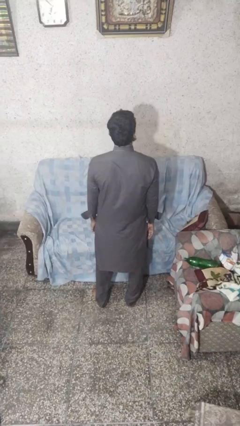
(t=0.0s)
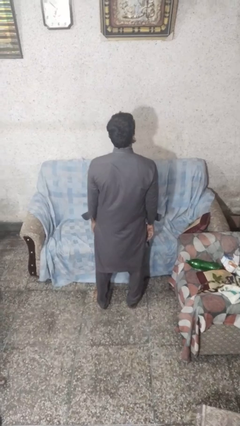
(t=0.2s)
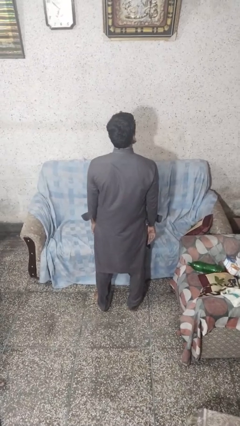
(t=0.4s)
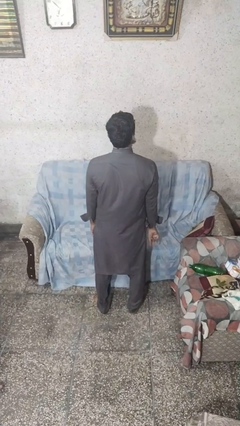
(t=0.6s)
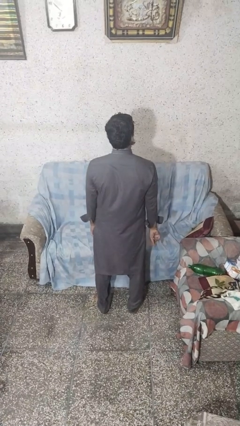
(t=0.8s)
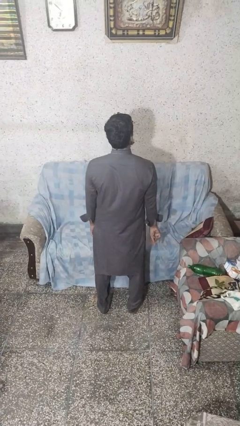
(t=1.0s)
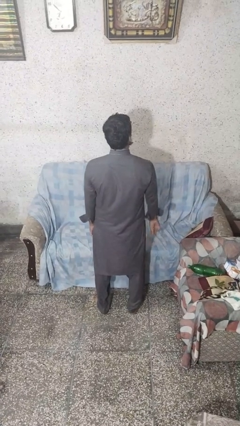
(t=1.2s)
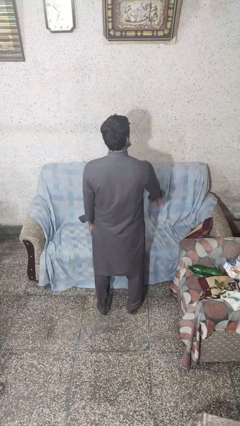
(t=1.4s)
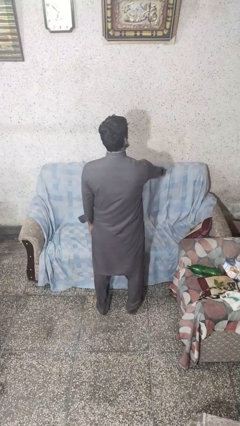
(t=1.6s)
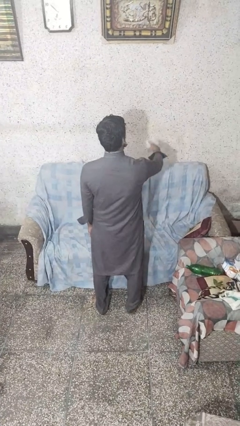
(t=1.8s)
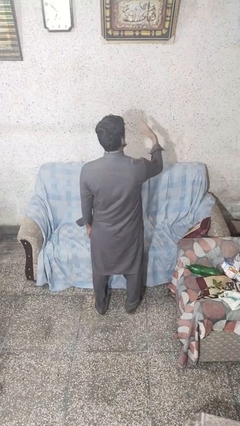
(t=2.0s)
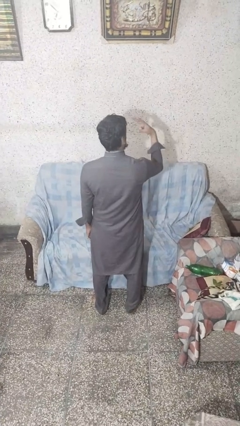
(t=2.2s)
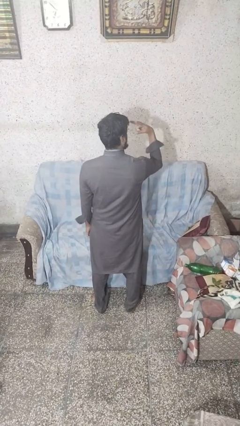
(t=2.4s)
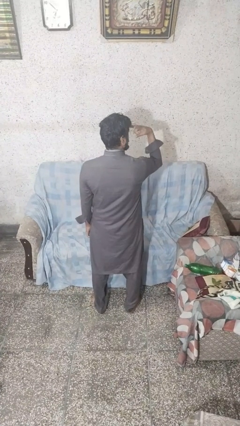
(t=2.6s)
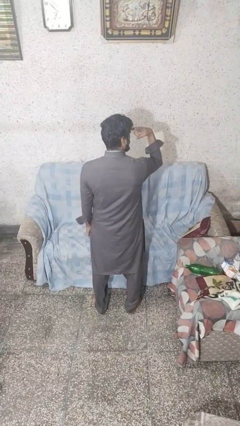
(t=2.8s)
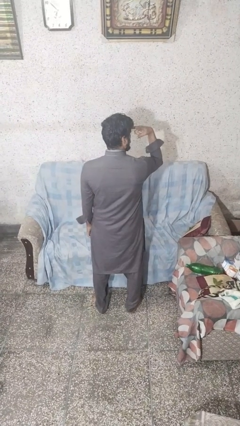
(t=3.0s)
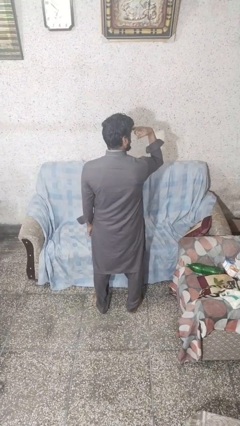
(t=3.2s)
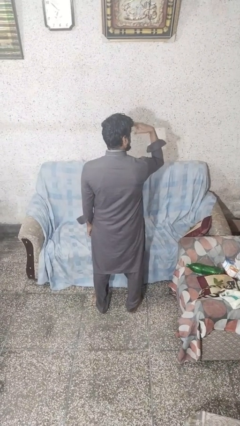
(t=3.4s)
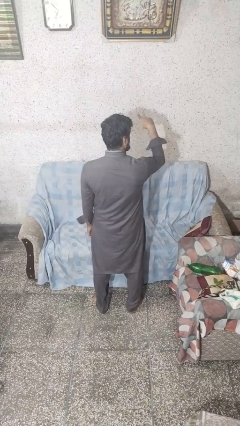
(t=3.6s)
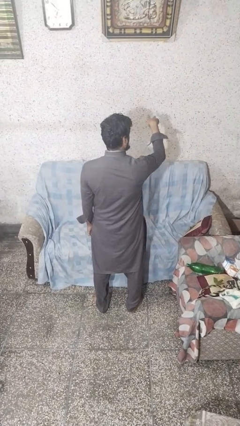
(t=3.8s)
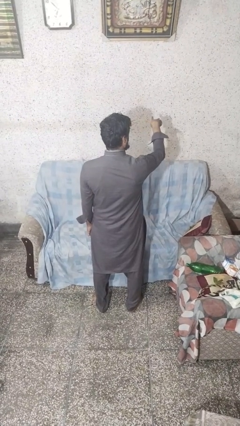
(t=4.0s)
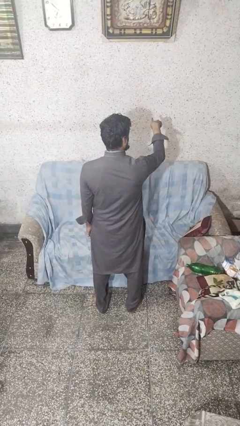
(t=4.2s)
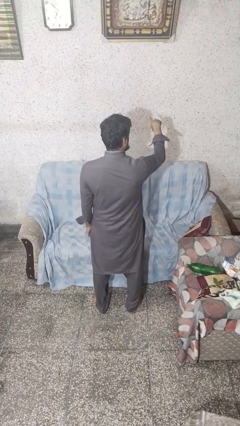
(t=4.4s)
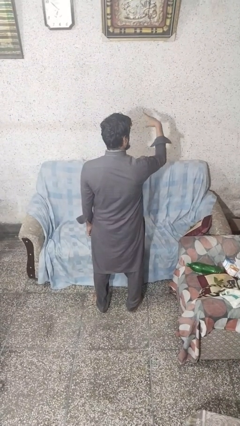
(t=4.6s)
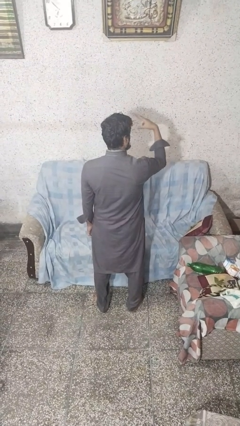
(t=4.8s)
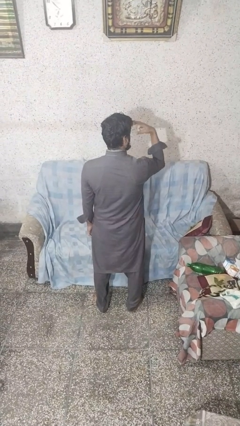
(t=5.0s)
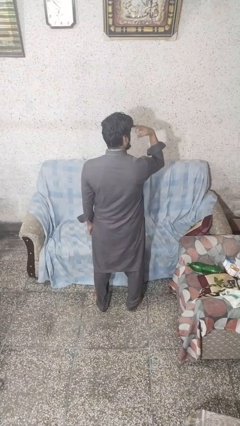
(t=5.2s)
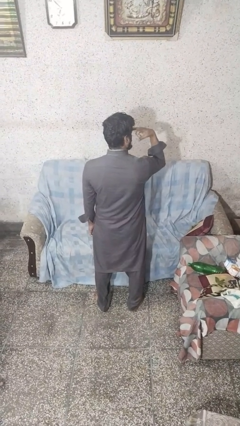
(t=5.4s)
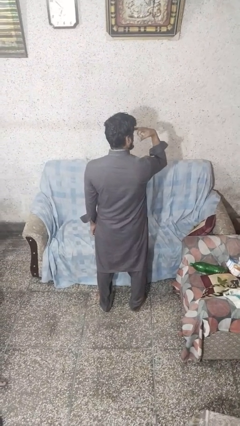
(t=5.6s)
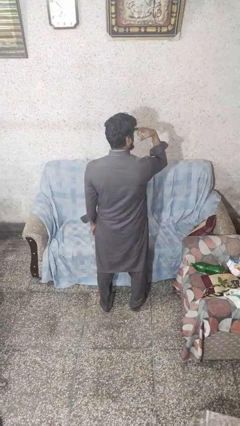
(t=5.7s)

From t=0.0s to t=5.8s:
person gestures watch closely

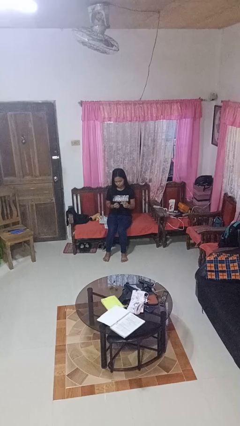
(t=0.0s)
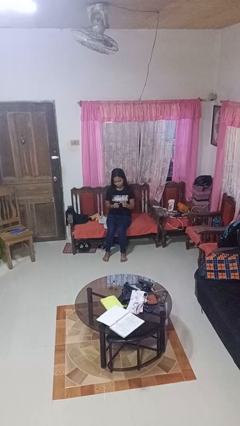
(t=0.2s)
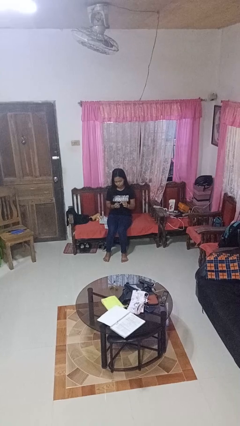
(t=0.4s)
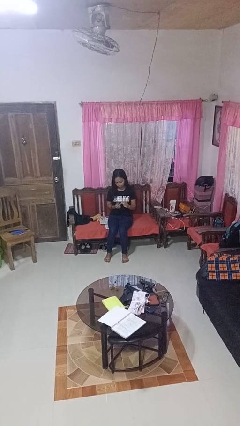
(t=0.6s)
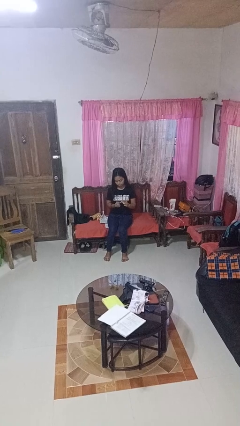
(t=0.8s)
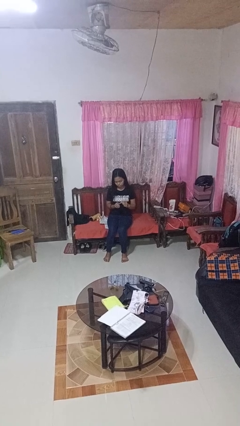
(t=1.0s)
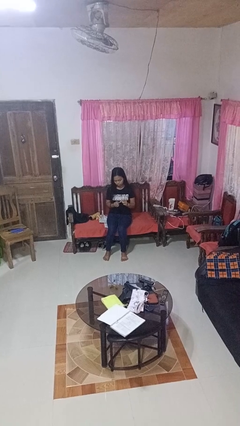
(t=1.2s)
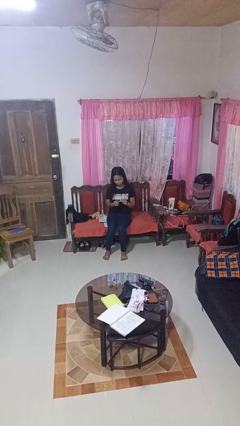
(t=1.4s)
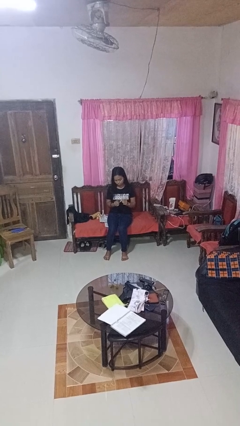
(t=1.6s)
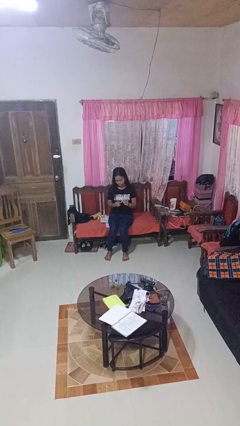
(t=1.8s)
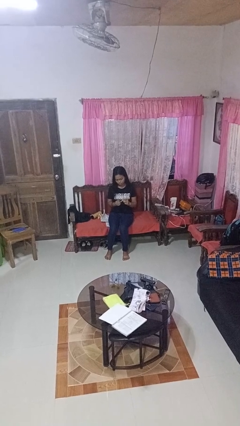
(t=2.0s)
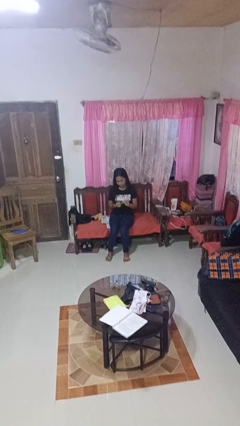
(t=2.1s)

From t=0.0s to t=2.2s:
person clips fingernails

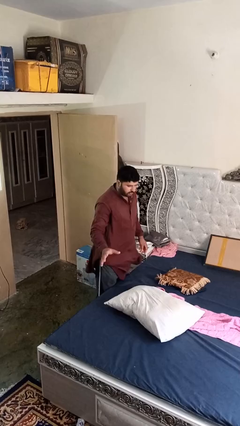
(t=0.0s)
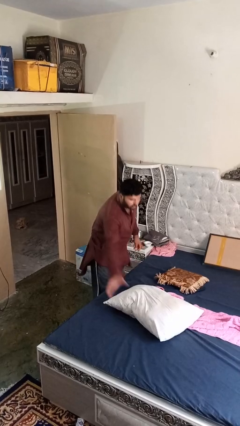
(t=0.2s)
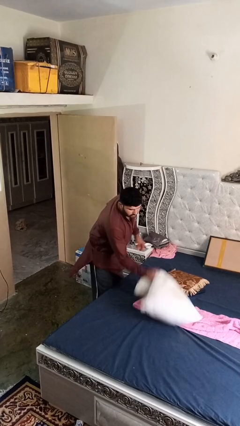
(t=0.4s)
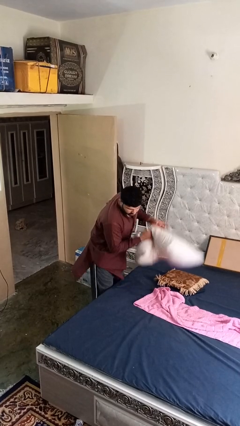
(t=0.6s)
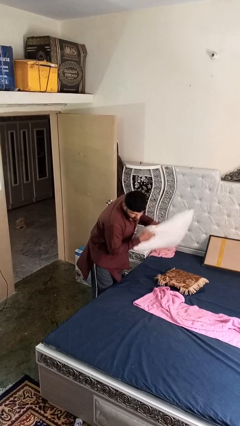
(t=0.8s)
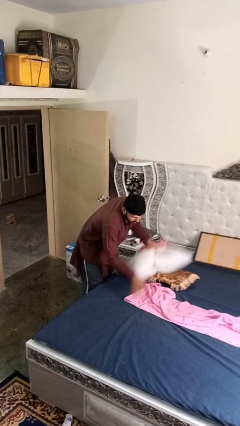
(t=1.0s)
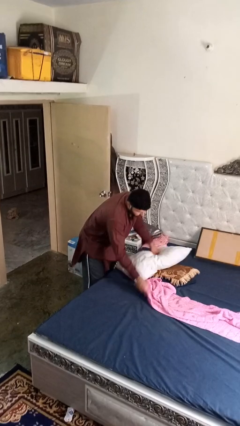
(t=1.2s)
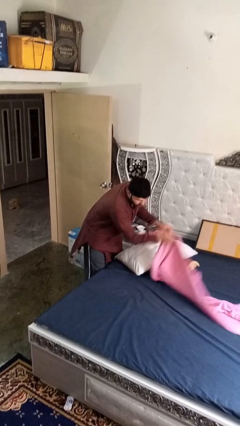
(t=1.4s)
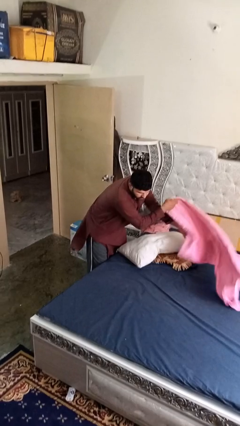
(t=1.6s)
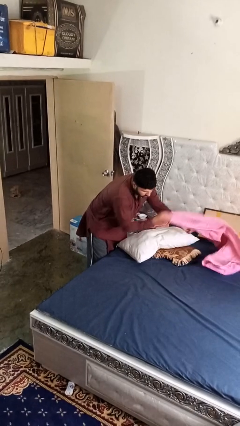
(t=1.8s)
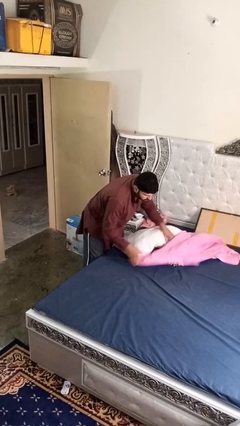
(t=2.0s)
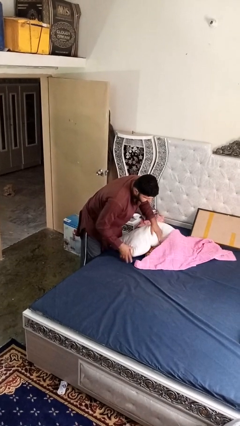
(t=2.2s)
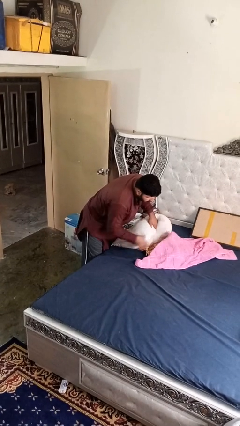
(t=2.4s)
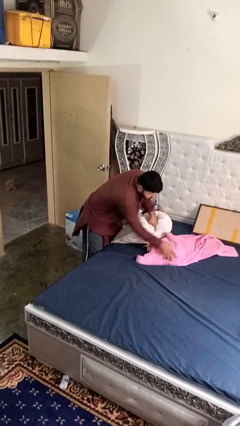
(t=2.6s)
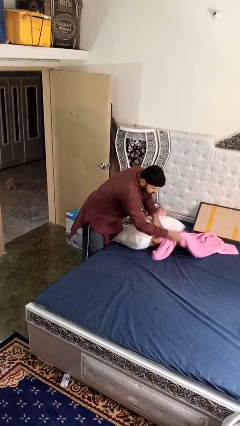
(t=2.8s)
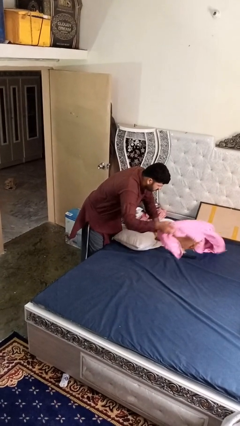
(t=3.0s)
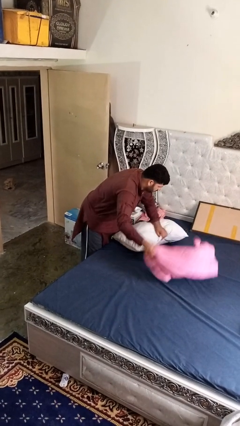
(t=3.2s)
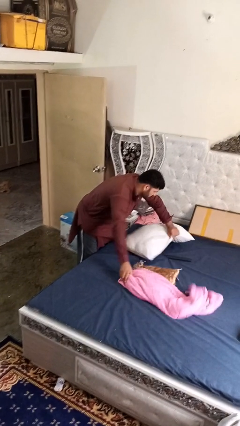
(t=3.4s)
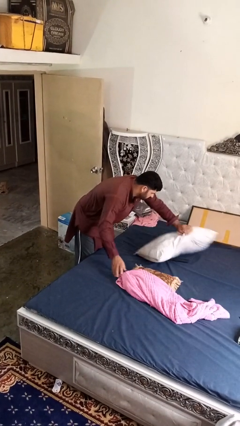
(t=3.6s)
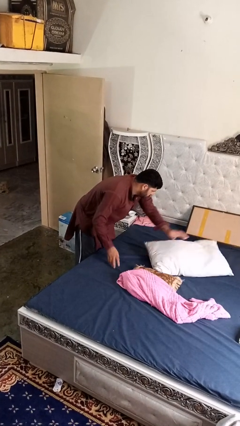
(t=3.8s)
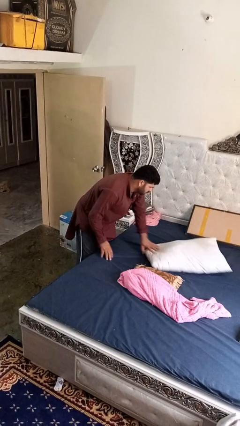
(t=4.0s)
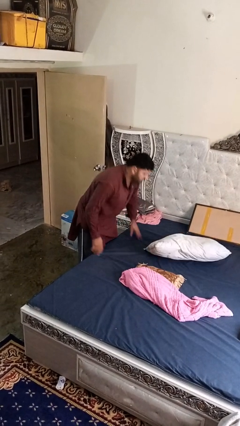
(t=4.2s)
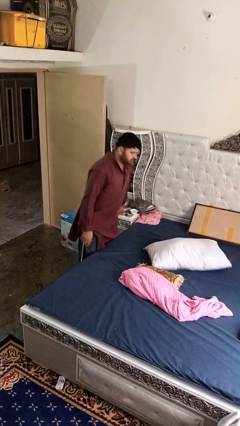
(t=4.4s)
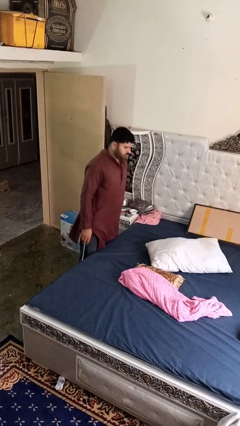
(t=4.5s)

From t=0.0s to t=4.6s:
person searches under bed

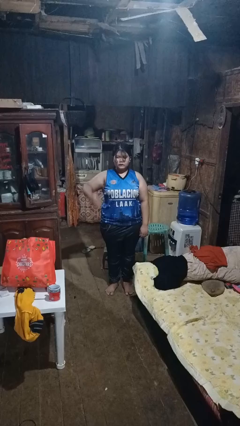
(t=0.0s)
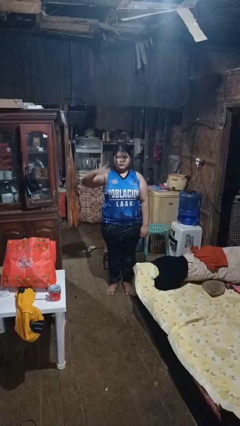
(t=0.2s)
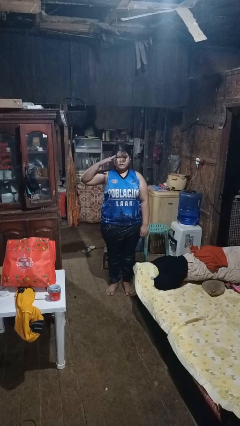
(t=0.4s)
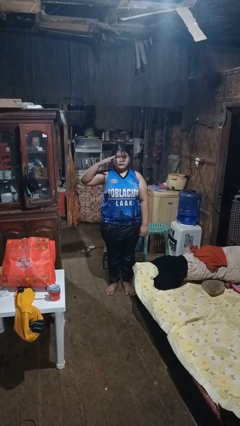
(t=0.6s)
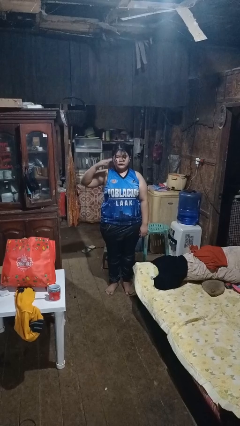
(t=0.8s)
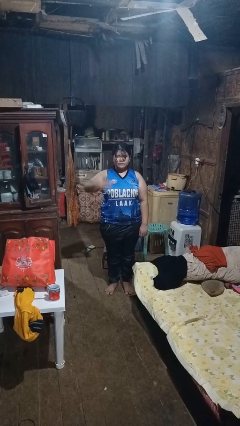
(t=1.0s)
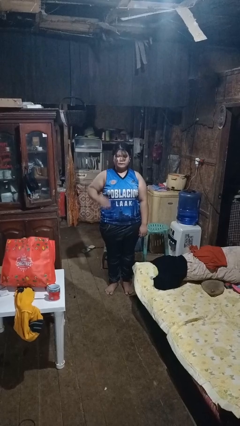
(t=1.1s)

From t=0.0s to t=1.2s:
person salutes

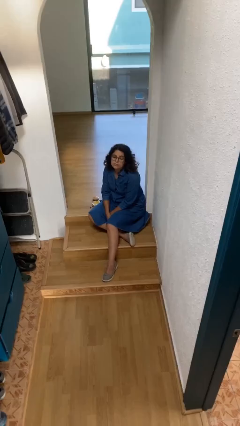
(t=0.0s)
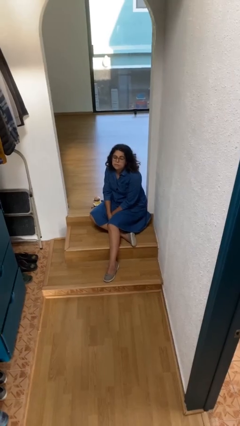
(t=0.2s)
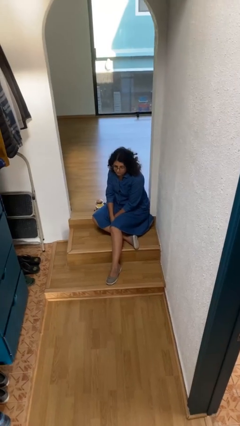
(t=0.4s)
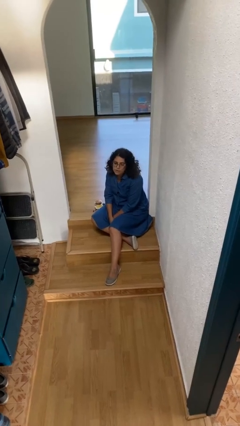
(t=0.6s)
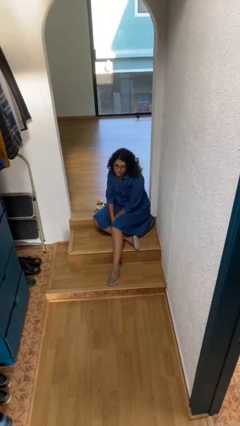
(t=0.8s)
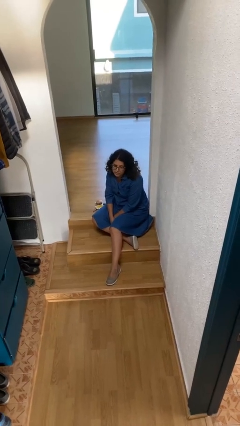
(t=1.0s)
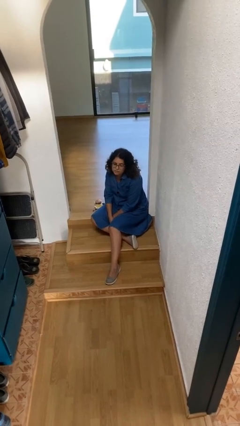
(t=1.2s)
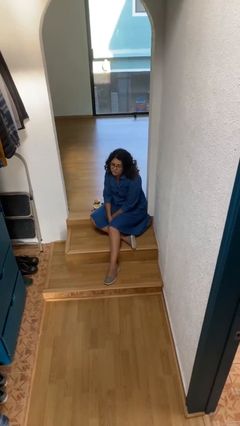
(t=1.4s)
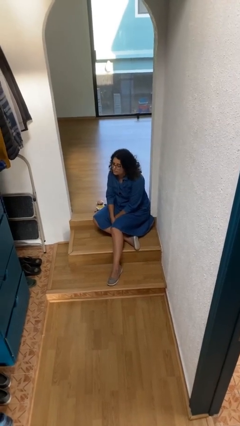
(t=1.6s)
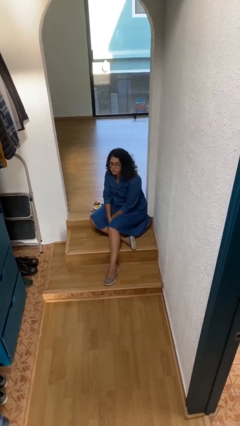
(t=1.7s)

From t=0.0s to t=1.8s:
person nods head

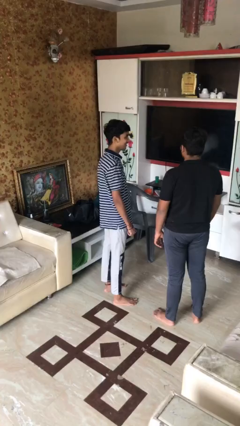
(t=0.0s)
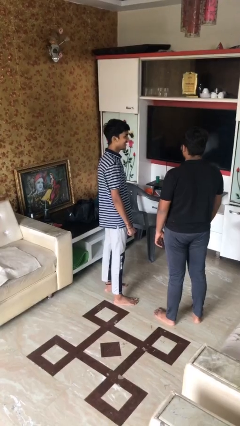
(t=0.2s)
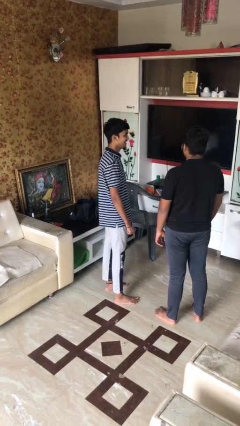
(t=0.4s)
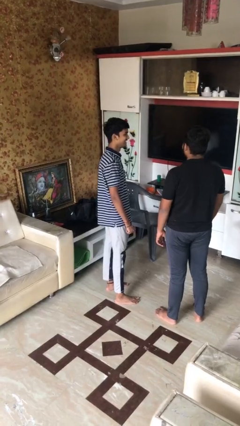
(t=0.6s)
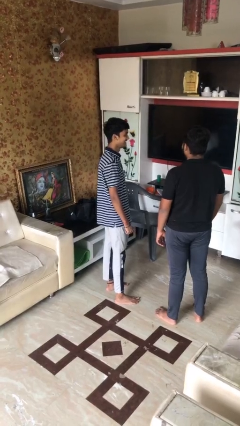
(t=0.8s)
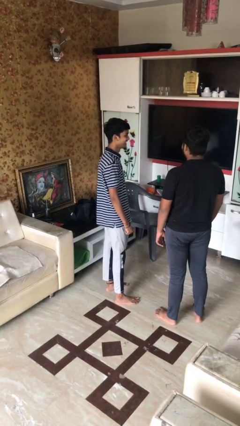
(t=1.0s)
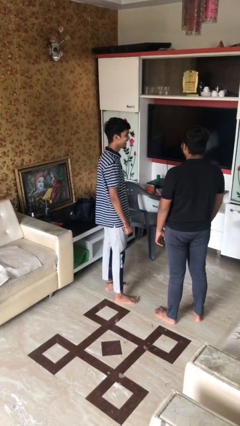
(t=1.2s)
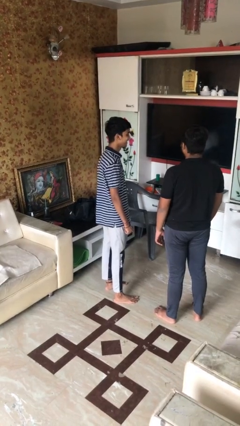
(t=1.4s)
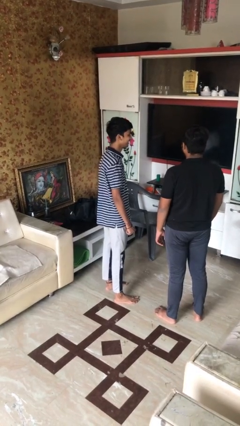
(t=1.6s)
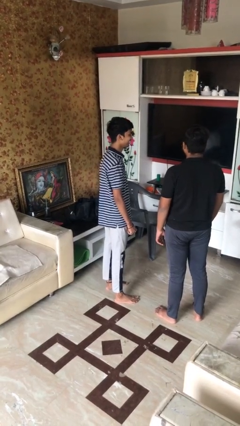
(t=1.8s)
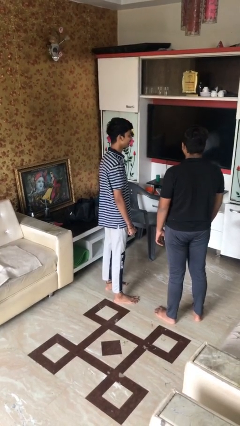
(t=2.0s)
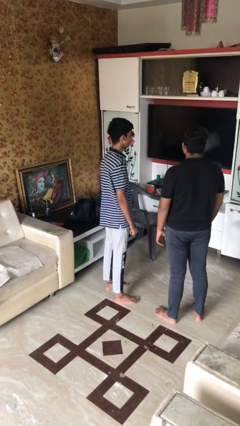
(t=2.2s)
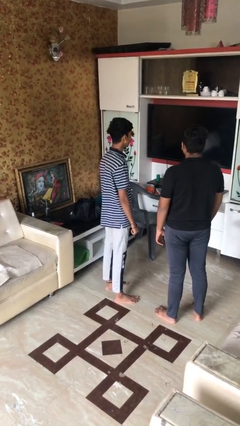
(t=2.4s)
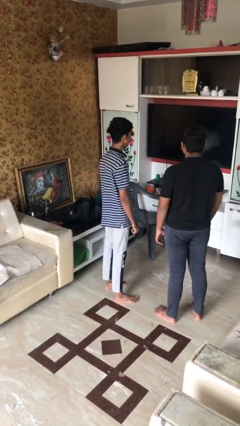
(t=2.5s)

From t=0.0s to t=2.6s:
person laughs with person
